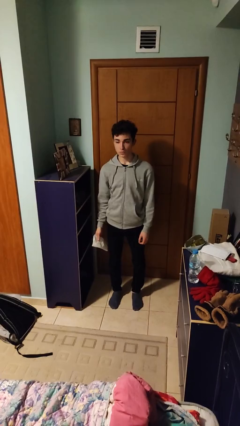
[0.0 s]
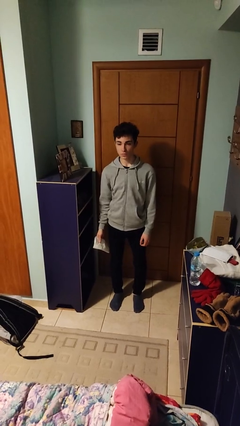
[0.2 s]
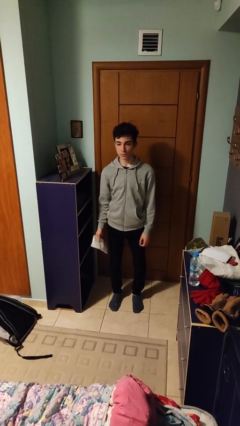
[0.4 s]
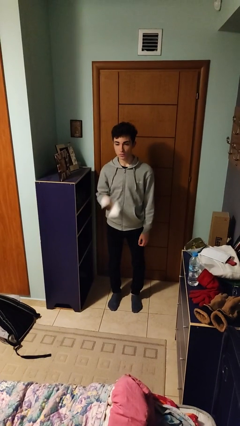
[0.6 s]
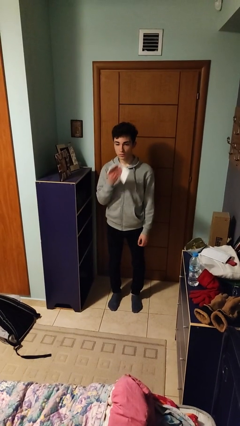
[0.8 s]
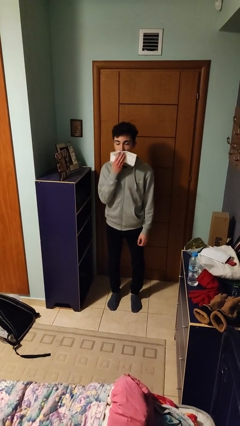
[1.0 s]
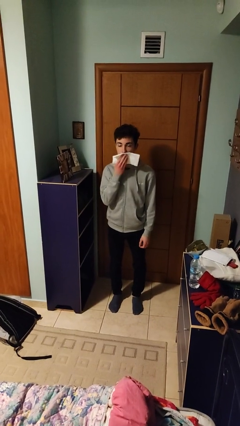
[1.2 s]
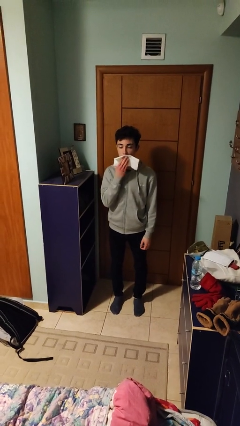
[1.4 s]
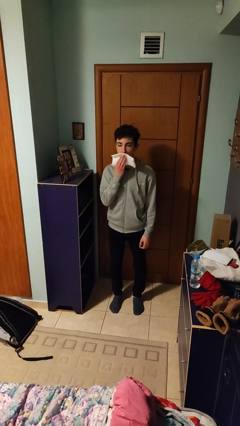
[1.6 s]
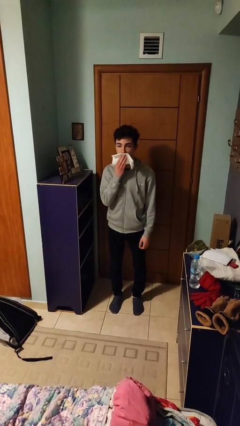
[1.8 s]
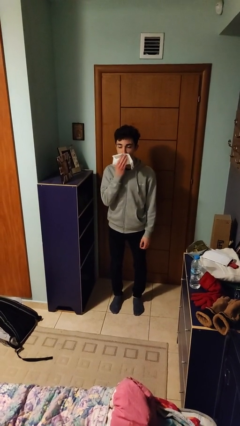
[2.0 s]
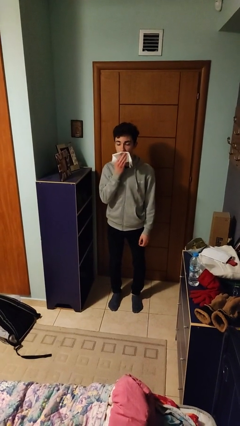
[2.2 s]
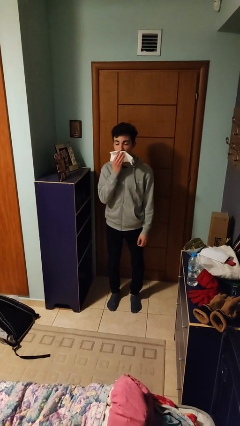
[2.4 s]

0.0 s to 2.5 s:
person wipes mouth with napkin

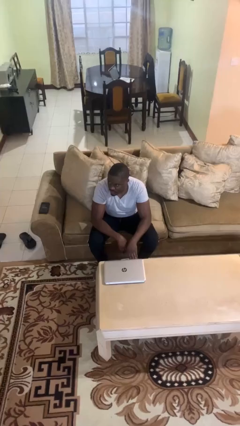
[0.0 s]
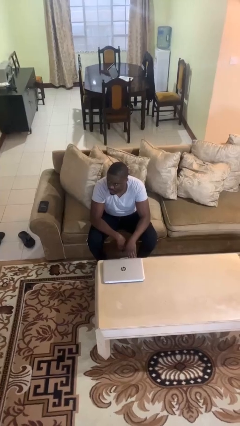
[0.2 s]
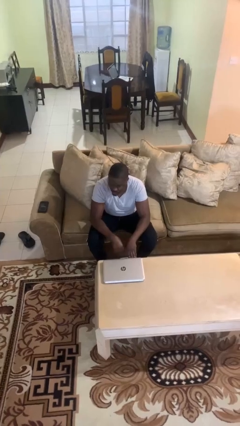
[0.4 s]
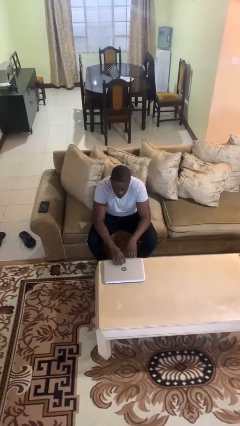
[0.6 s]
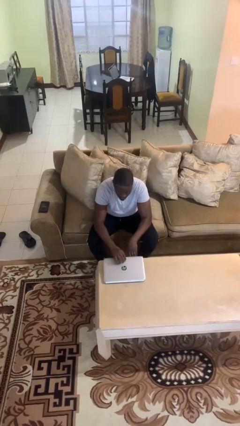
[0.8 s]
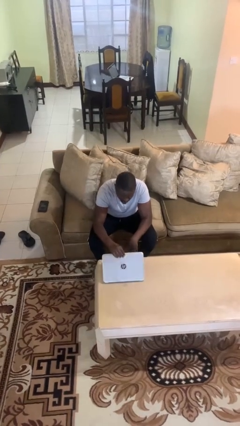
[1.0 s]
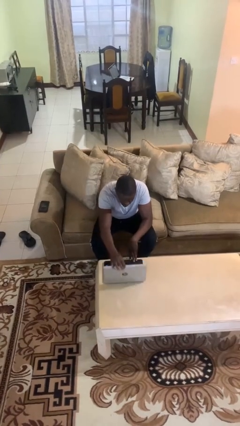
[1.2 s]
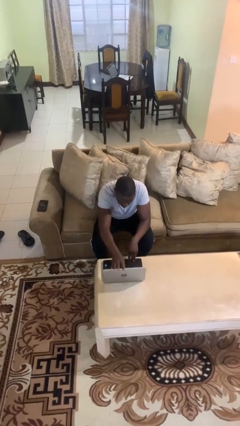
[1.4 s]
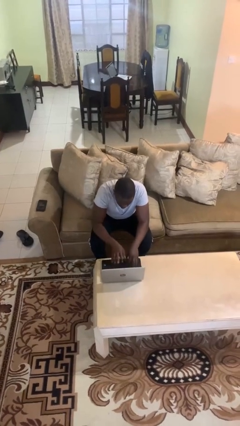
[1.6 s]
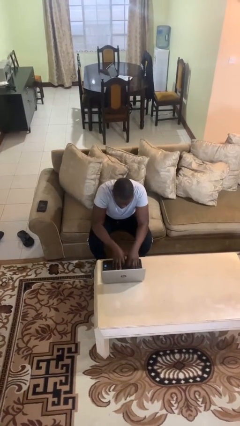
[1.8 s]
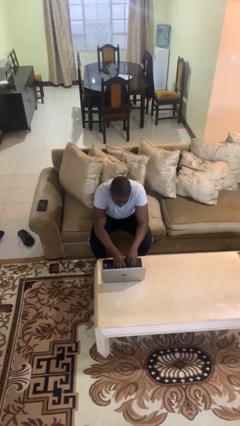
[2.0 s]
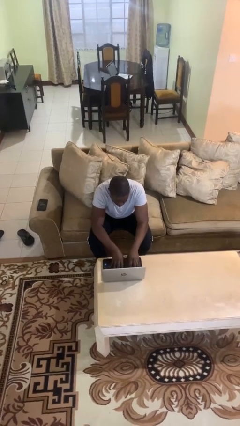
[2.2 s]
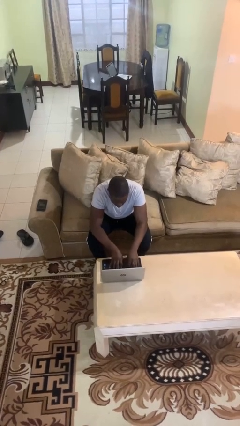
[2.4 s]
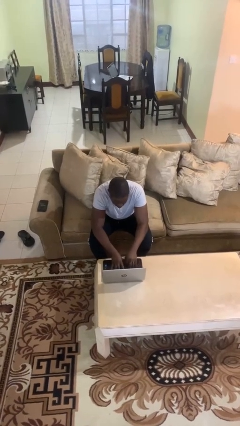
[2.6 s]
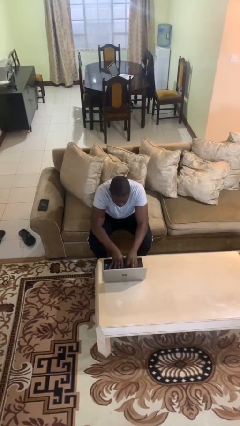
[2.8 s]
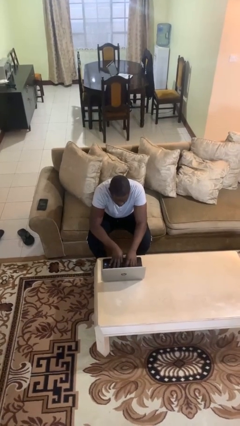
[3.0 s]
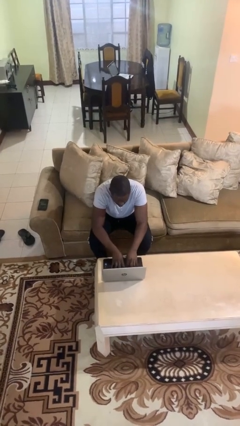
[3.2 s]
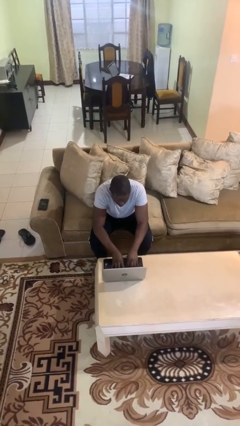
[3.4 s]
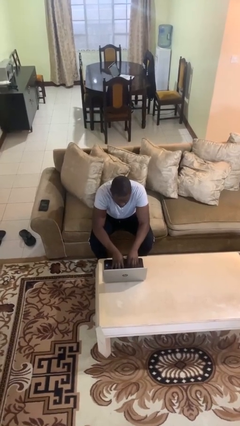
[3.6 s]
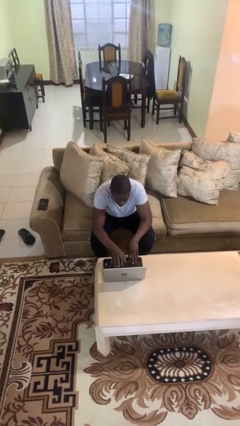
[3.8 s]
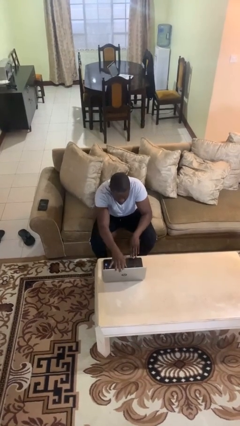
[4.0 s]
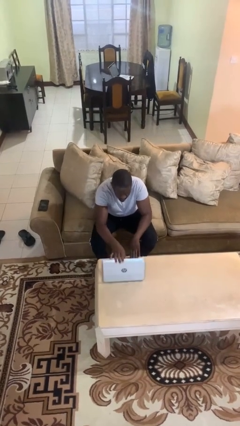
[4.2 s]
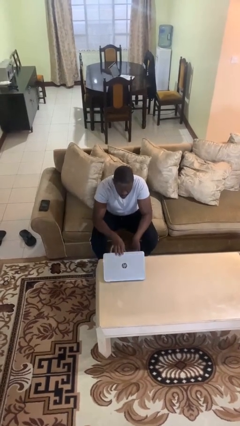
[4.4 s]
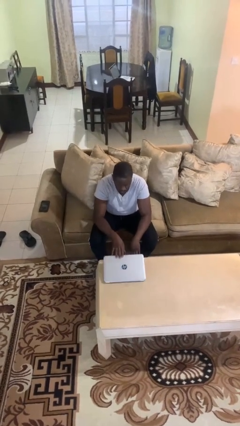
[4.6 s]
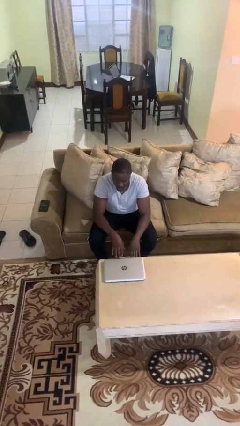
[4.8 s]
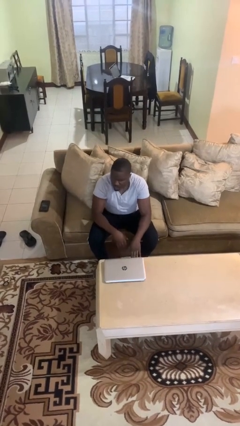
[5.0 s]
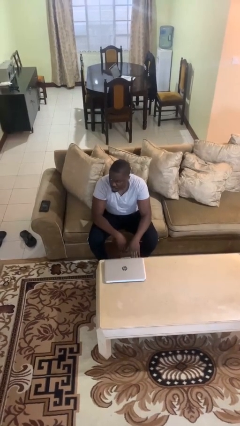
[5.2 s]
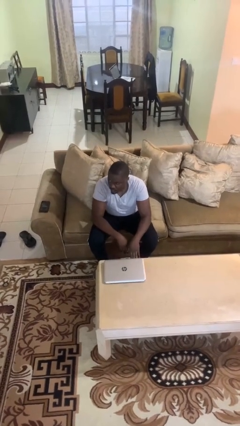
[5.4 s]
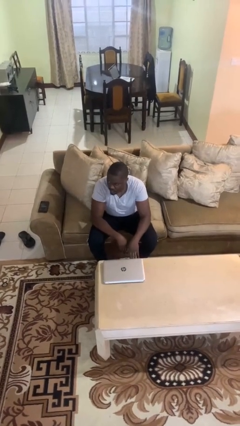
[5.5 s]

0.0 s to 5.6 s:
person interacts with laptop

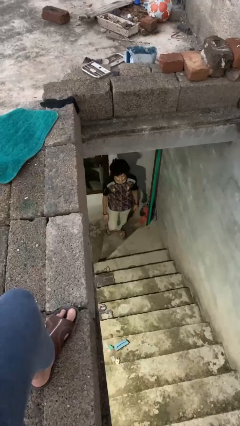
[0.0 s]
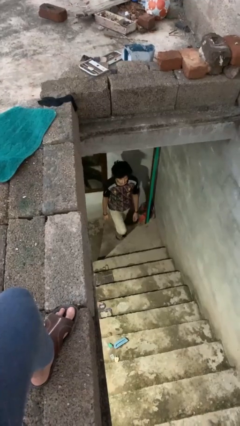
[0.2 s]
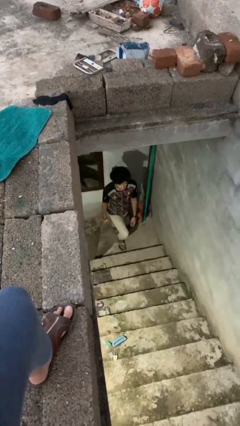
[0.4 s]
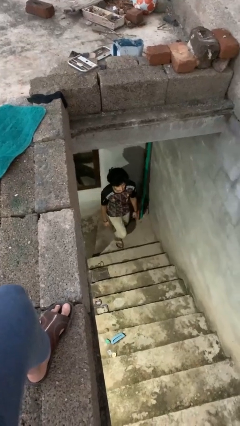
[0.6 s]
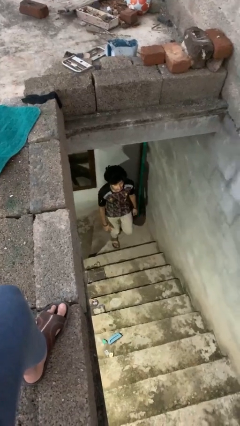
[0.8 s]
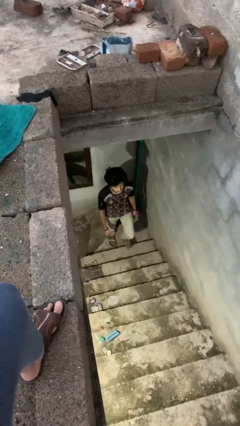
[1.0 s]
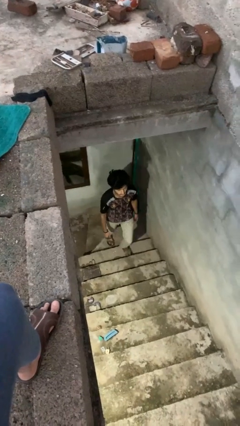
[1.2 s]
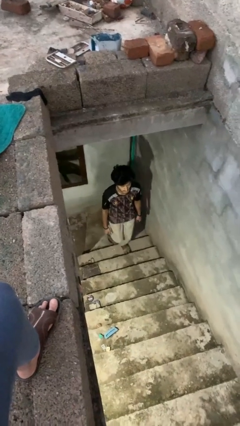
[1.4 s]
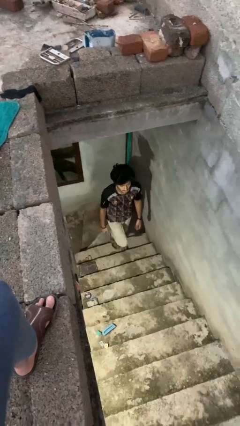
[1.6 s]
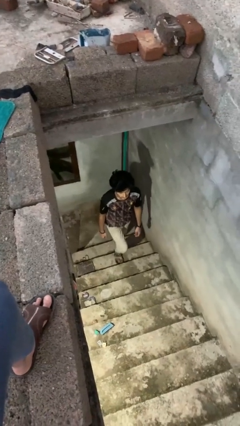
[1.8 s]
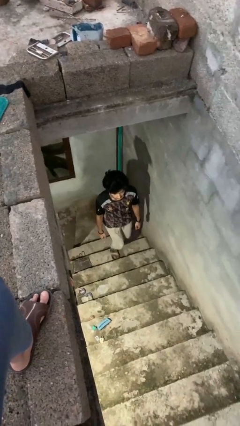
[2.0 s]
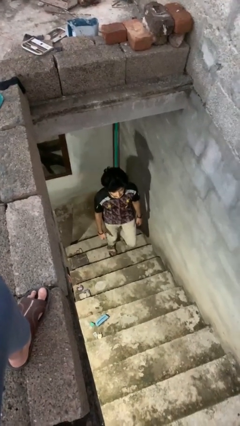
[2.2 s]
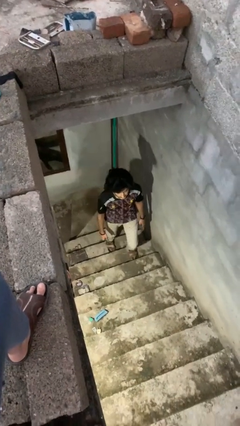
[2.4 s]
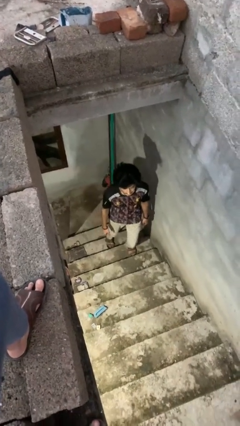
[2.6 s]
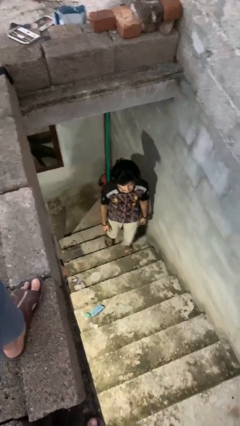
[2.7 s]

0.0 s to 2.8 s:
person climbs up stairs

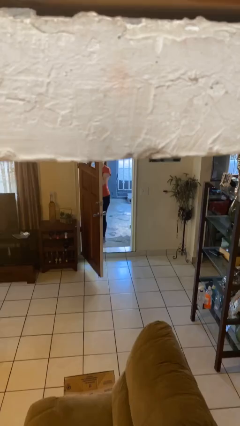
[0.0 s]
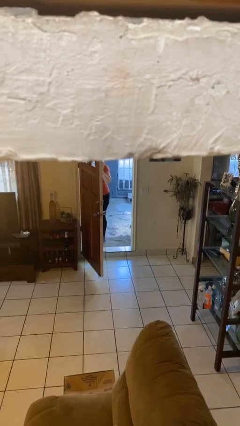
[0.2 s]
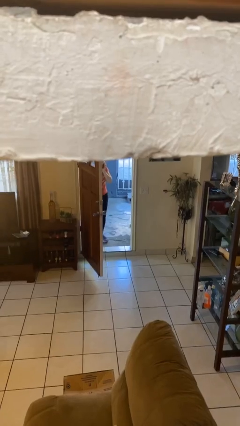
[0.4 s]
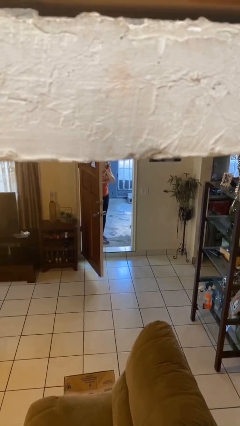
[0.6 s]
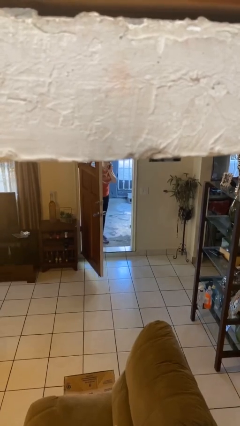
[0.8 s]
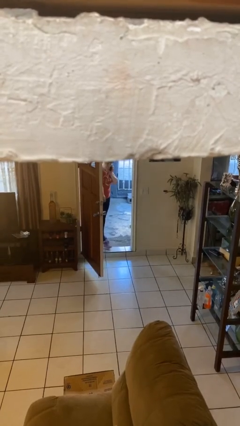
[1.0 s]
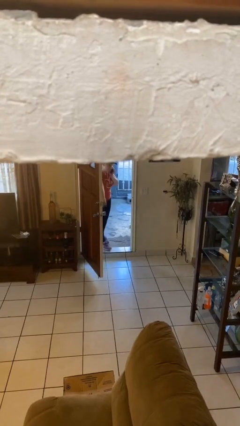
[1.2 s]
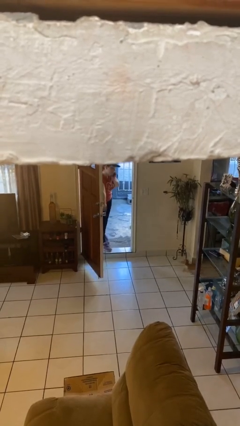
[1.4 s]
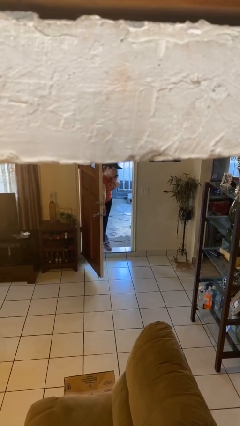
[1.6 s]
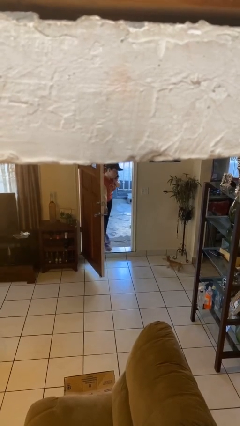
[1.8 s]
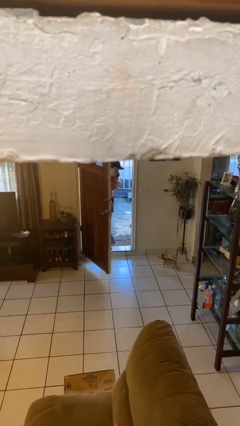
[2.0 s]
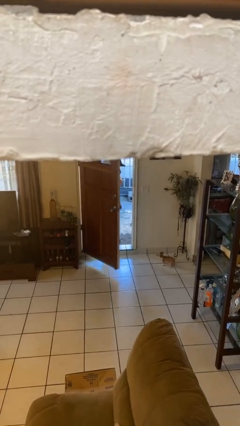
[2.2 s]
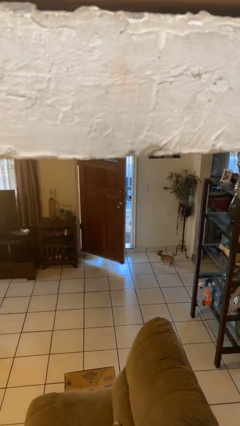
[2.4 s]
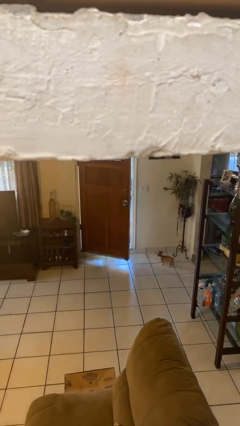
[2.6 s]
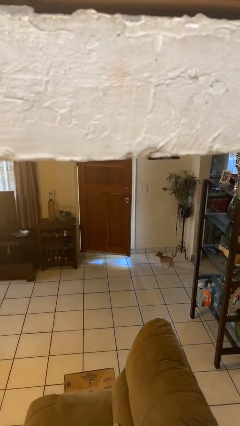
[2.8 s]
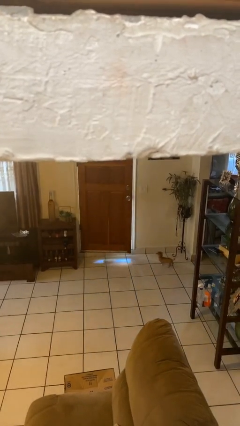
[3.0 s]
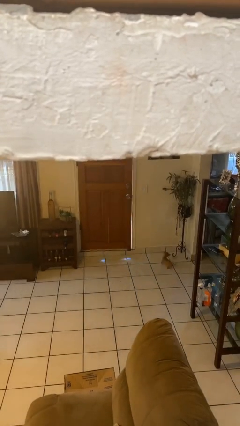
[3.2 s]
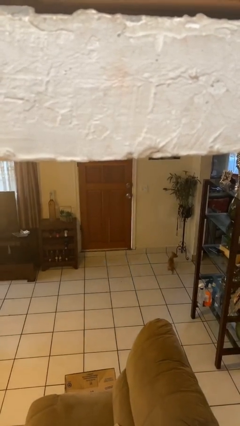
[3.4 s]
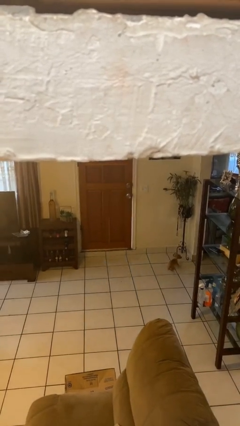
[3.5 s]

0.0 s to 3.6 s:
person closes facility door

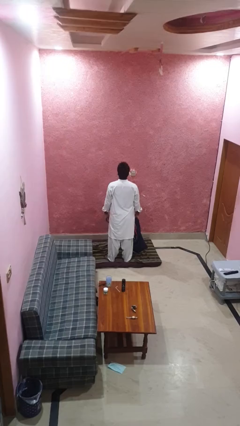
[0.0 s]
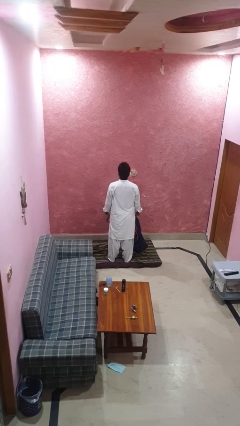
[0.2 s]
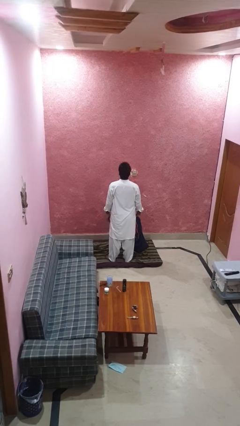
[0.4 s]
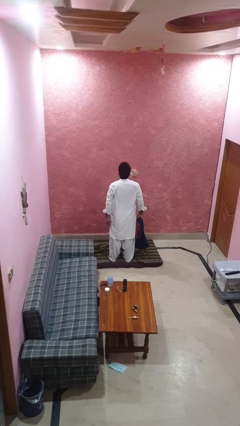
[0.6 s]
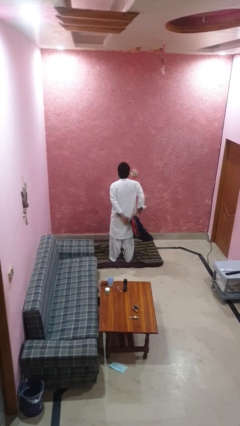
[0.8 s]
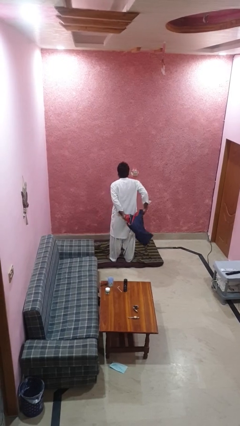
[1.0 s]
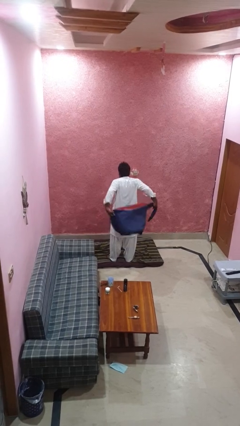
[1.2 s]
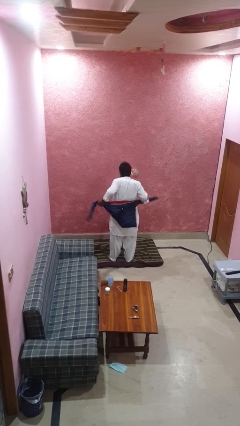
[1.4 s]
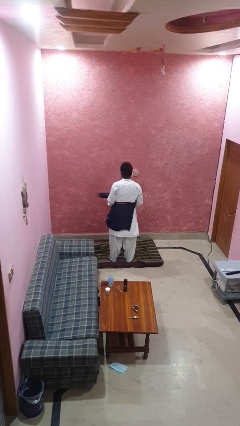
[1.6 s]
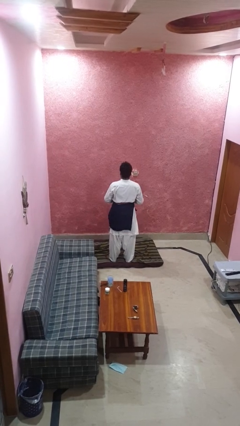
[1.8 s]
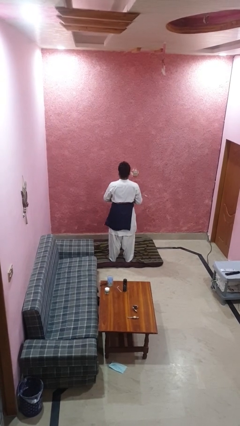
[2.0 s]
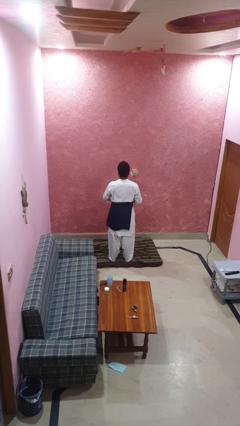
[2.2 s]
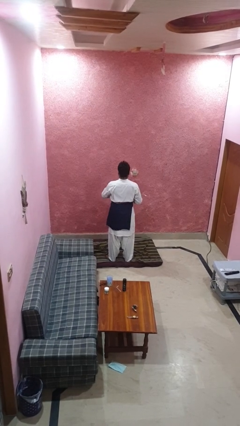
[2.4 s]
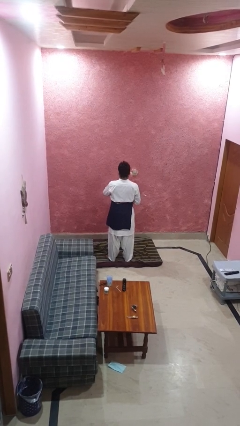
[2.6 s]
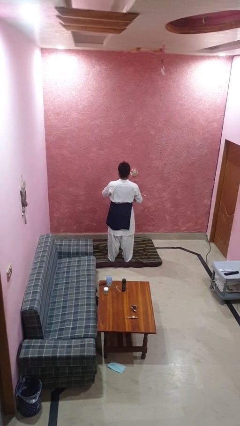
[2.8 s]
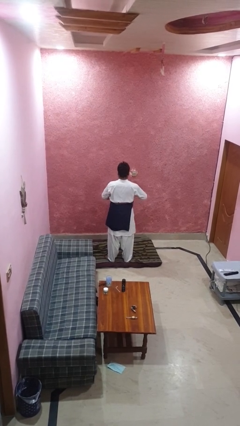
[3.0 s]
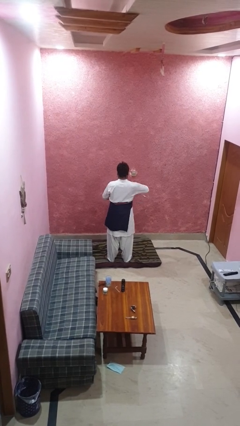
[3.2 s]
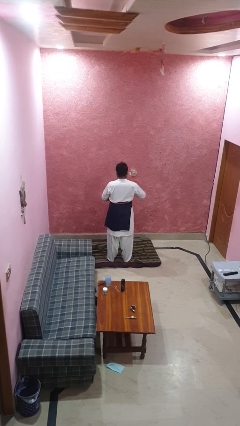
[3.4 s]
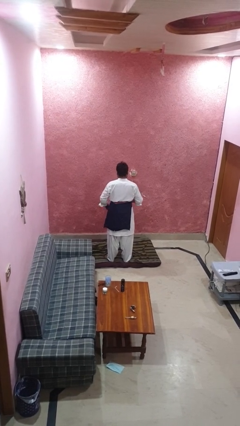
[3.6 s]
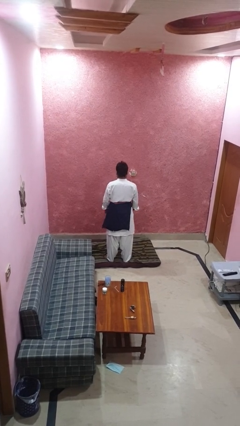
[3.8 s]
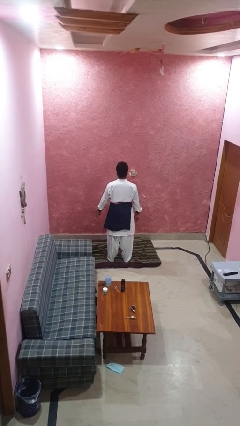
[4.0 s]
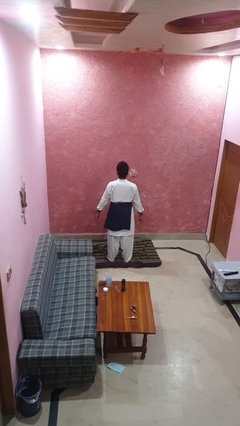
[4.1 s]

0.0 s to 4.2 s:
person ties jacket around waist
